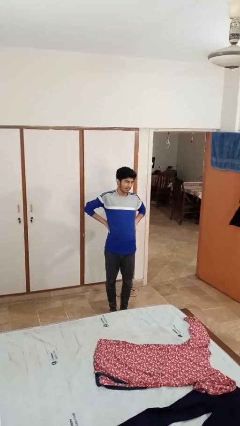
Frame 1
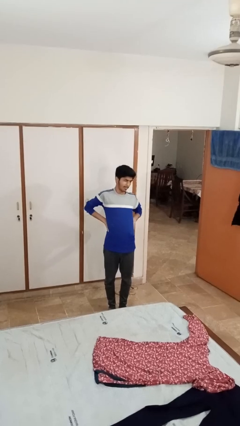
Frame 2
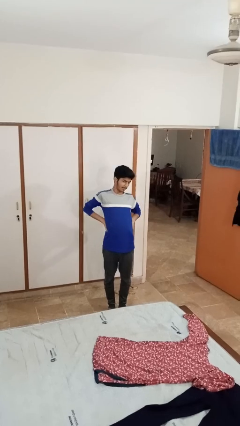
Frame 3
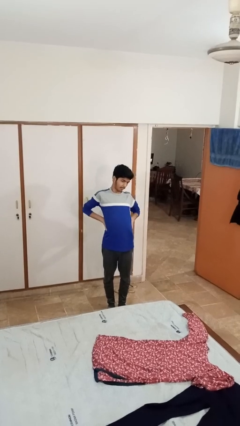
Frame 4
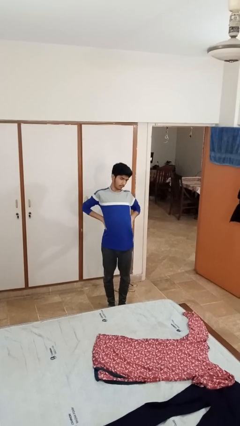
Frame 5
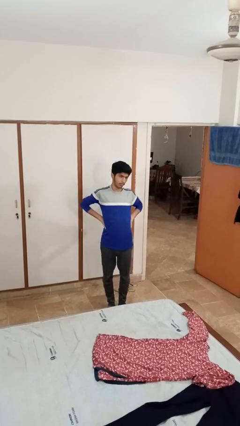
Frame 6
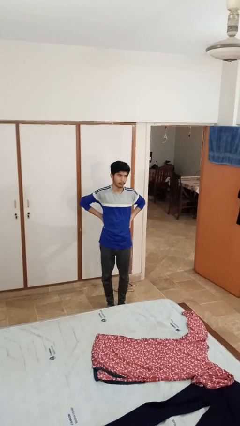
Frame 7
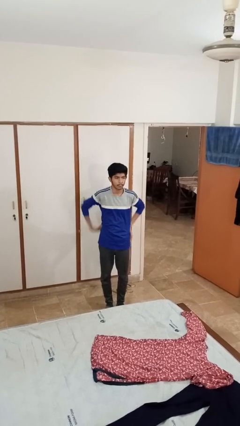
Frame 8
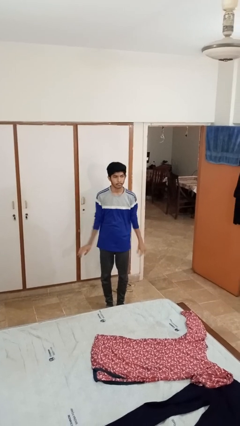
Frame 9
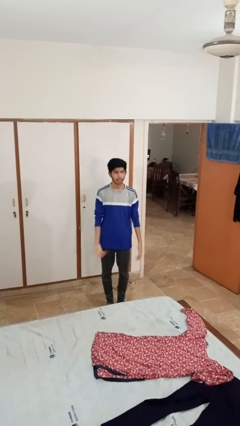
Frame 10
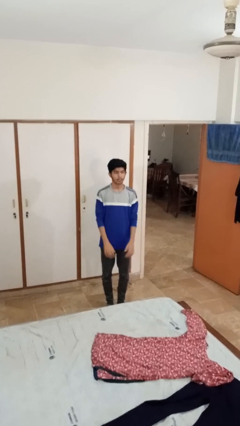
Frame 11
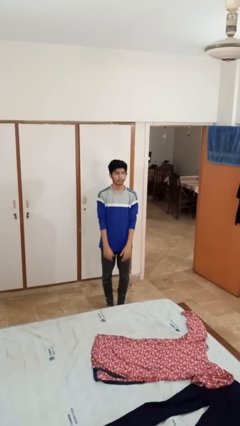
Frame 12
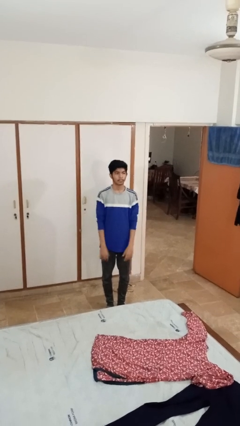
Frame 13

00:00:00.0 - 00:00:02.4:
person stretches back

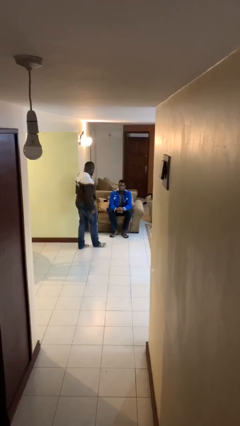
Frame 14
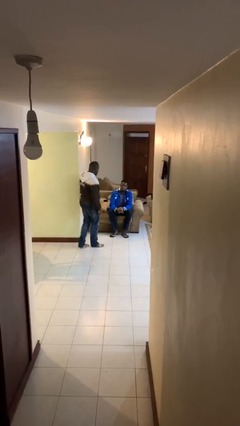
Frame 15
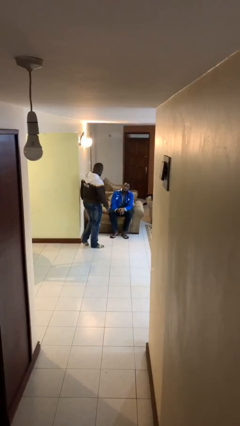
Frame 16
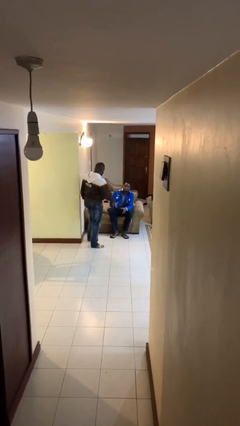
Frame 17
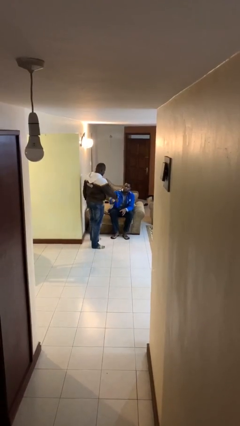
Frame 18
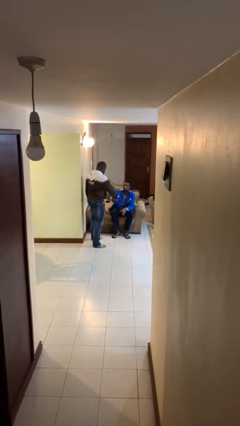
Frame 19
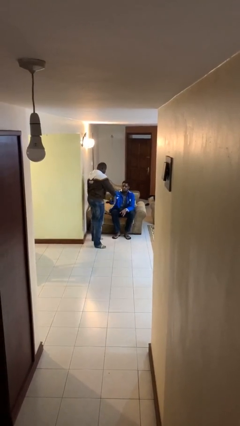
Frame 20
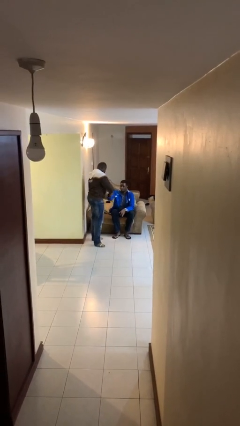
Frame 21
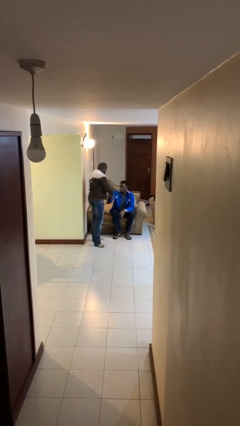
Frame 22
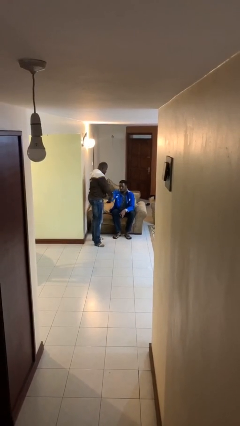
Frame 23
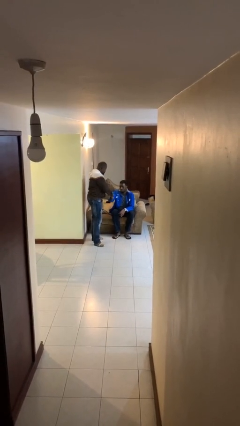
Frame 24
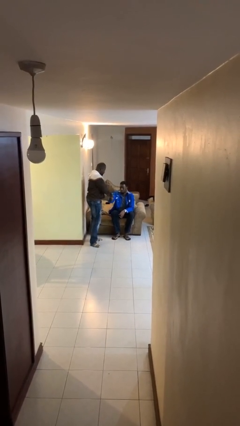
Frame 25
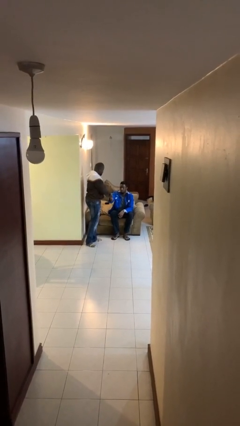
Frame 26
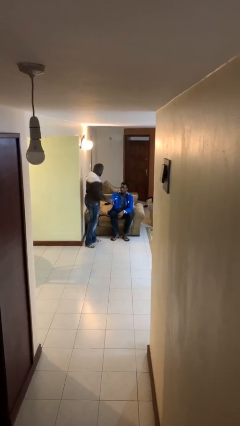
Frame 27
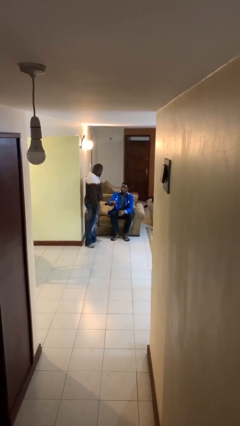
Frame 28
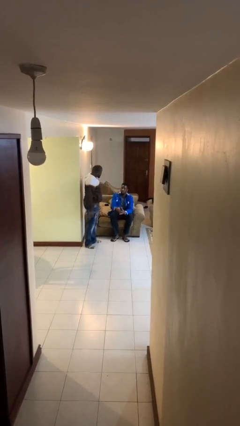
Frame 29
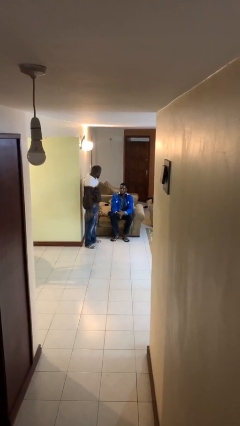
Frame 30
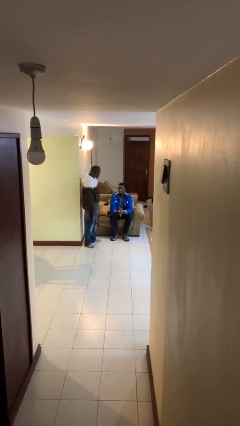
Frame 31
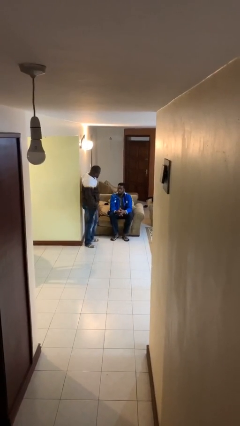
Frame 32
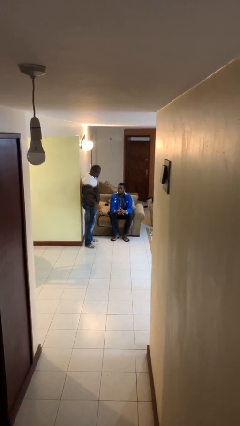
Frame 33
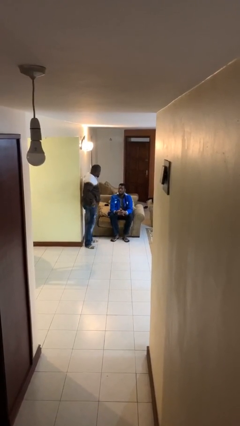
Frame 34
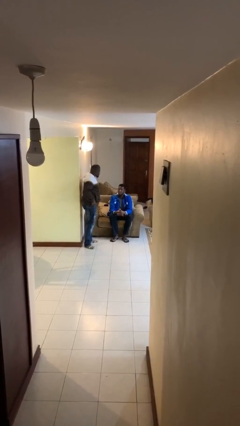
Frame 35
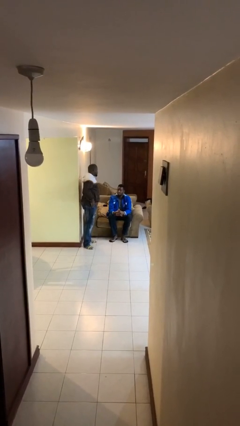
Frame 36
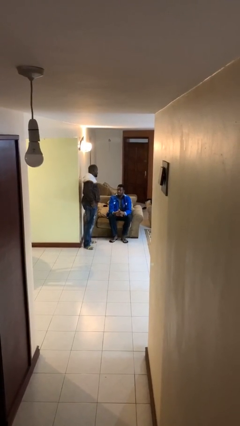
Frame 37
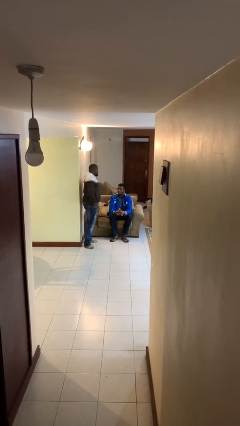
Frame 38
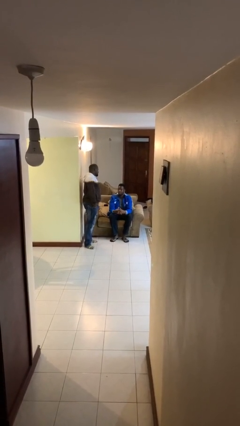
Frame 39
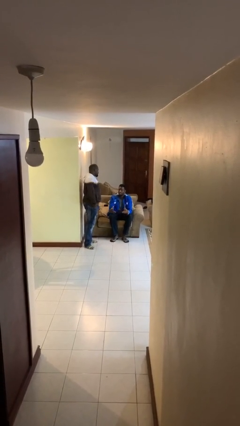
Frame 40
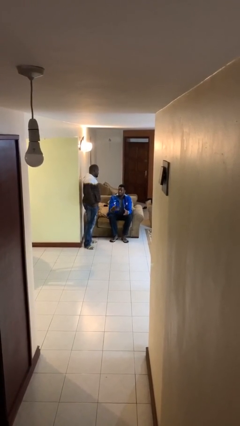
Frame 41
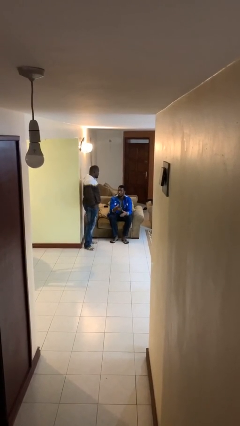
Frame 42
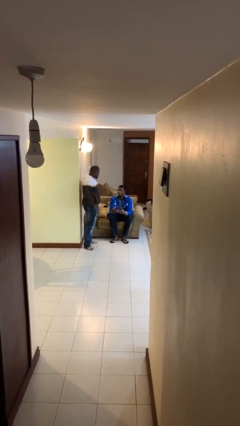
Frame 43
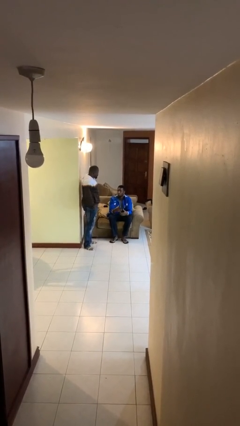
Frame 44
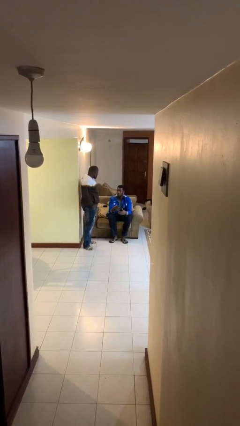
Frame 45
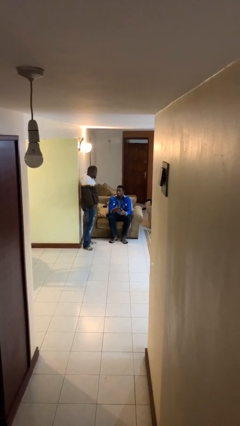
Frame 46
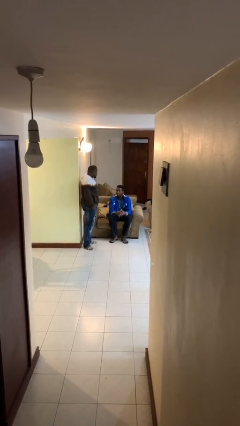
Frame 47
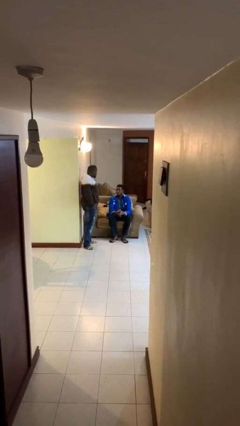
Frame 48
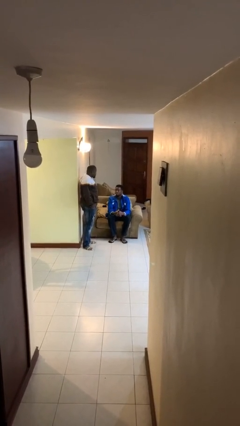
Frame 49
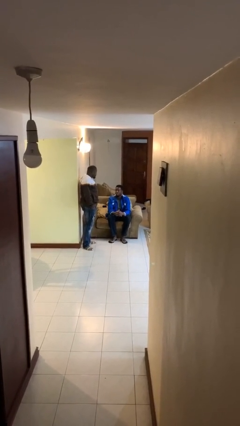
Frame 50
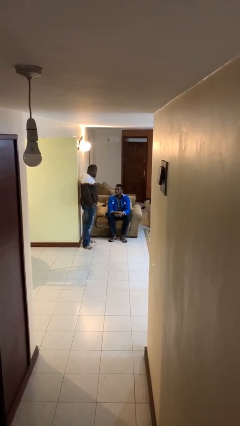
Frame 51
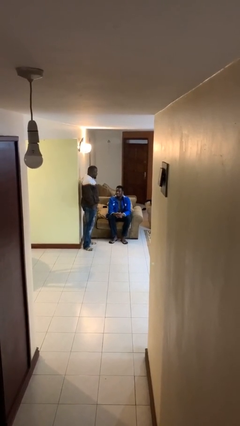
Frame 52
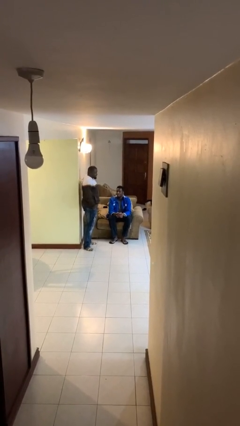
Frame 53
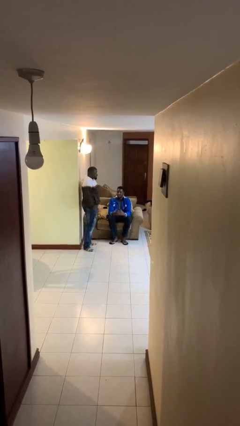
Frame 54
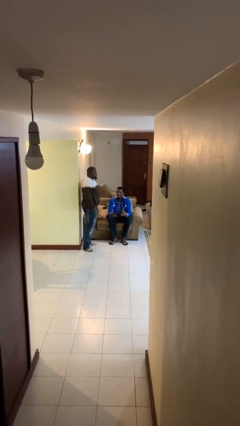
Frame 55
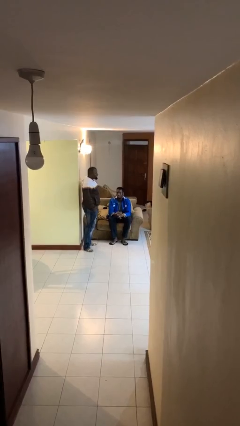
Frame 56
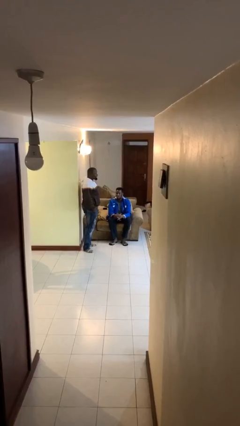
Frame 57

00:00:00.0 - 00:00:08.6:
person shakes hand

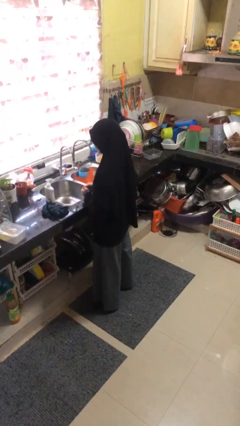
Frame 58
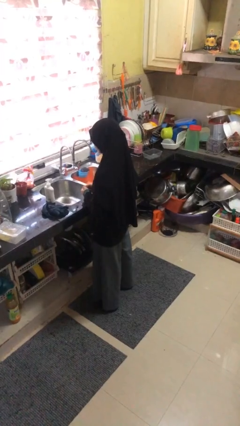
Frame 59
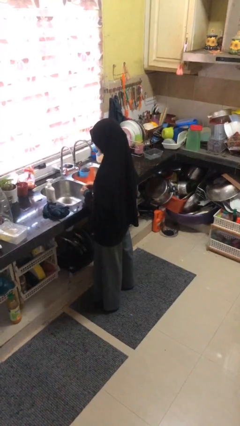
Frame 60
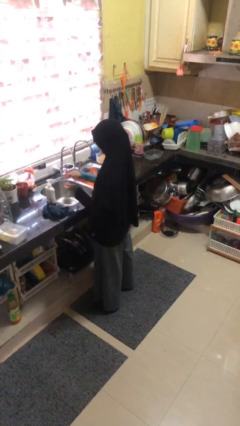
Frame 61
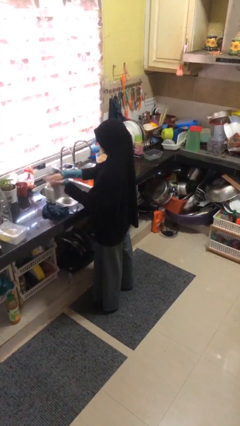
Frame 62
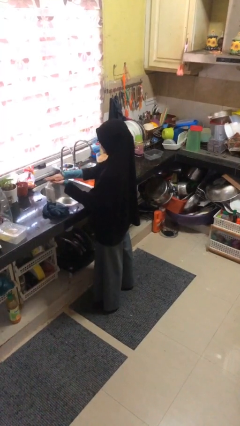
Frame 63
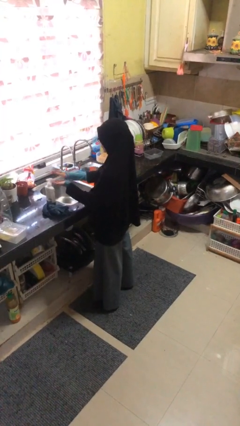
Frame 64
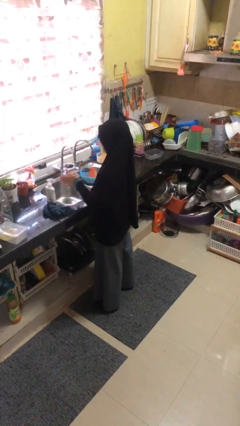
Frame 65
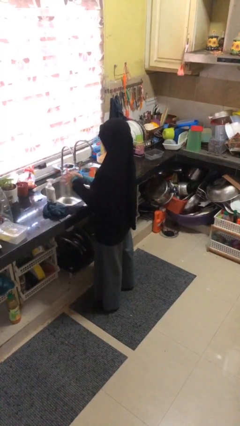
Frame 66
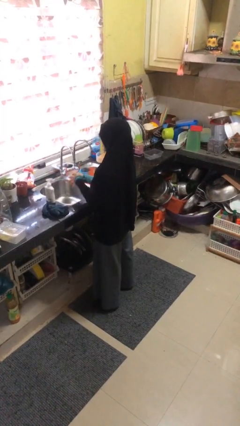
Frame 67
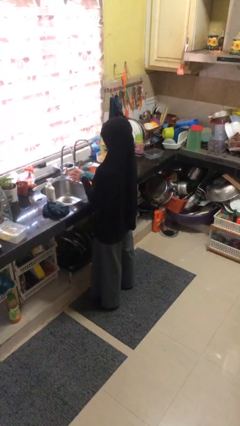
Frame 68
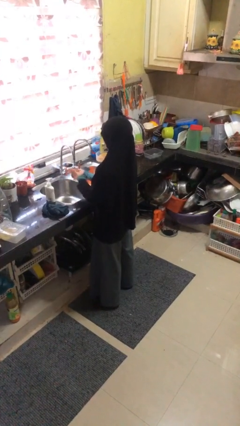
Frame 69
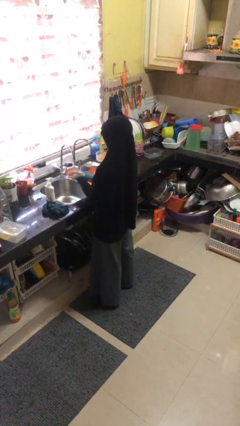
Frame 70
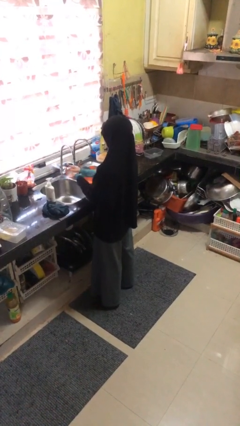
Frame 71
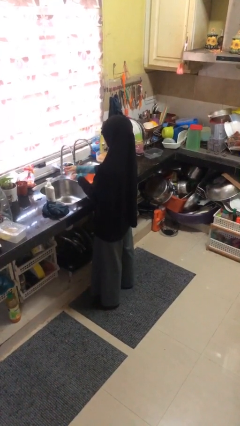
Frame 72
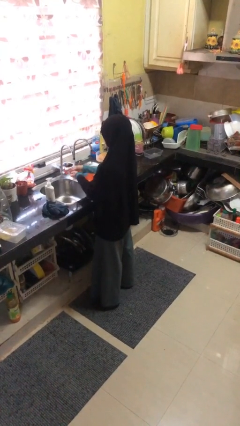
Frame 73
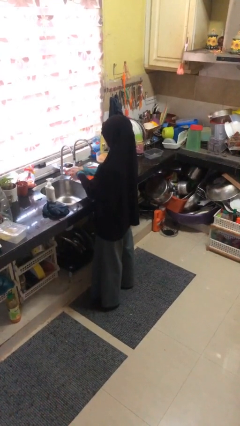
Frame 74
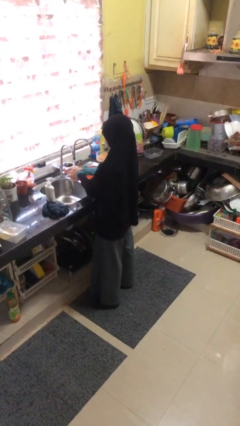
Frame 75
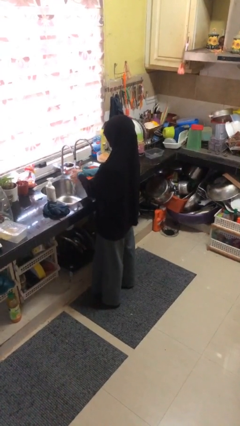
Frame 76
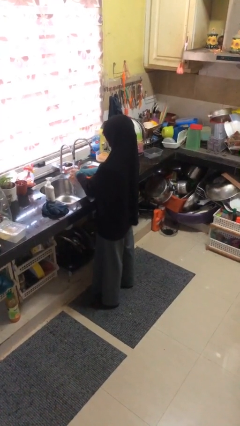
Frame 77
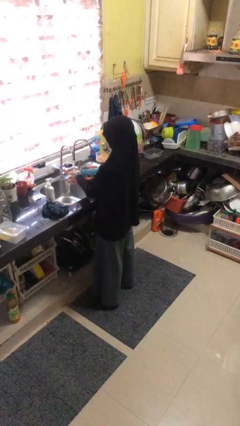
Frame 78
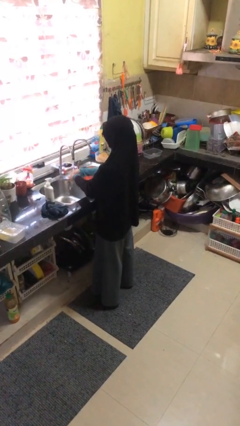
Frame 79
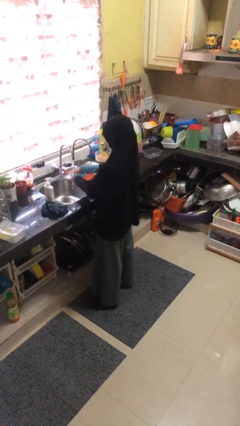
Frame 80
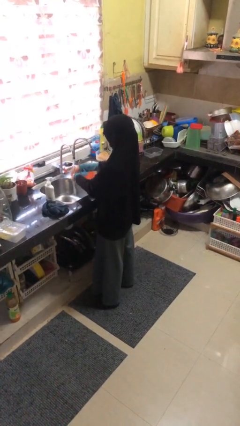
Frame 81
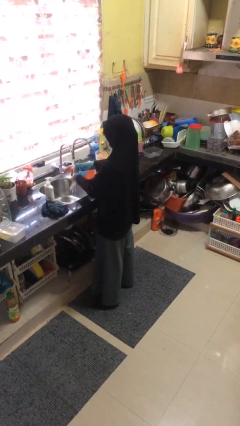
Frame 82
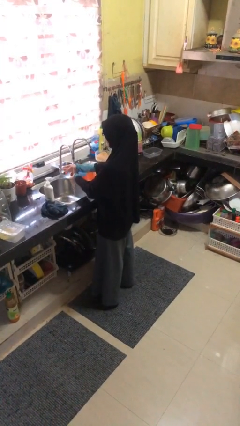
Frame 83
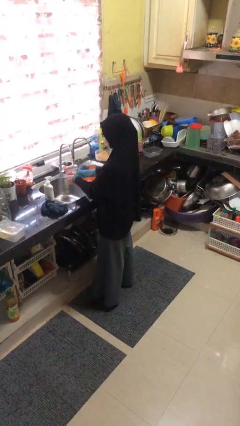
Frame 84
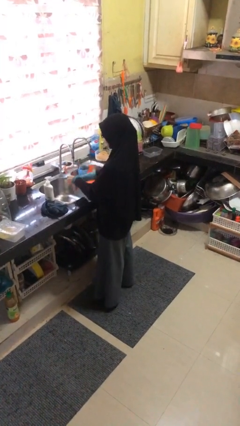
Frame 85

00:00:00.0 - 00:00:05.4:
person washes hands

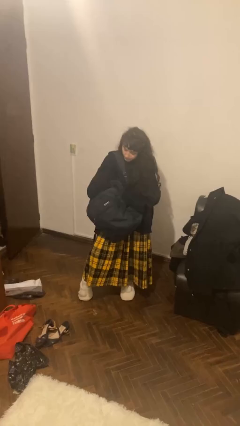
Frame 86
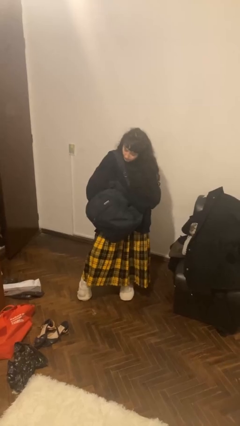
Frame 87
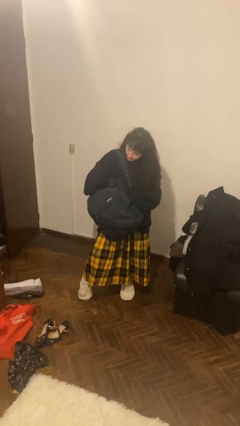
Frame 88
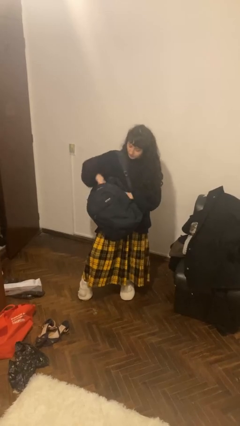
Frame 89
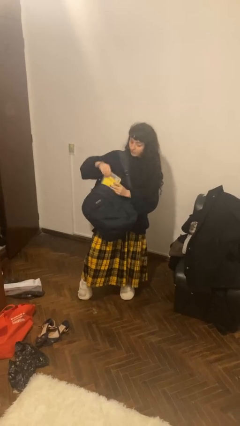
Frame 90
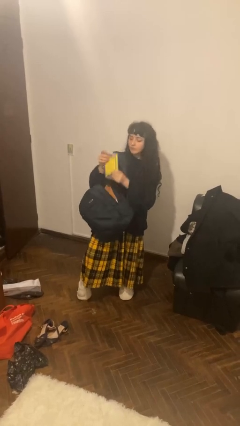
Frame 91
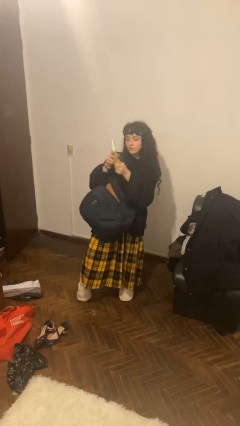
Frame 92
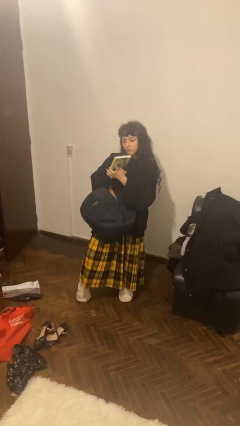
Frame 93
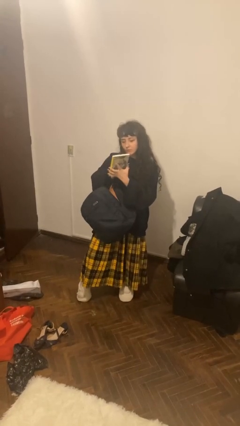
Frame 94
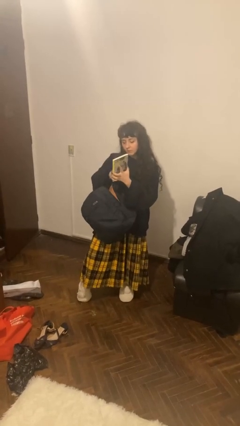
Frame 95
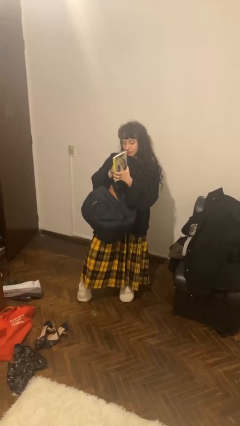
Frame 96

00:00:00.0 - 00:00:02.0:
person takes object from backpack
